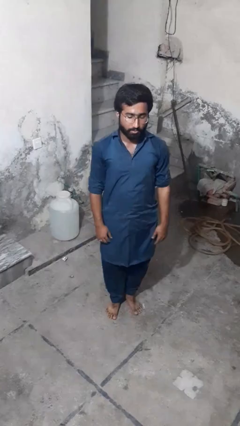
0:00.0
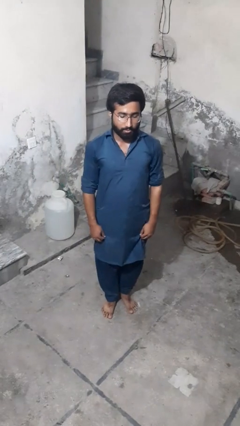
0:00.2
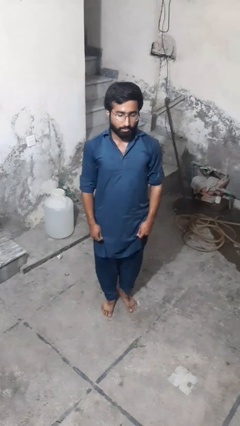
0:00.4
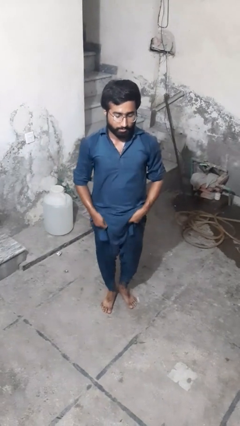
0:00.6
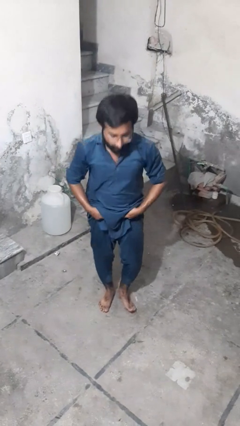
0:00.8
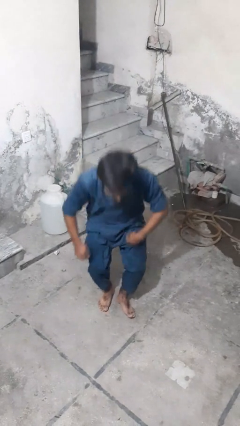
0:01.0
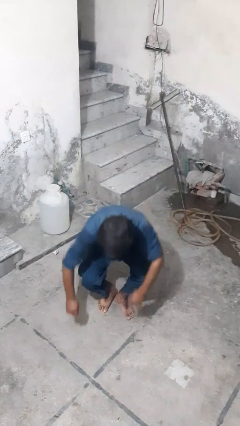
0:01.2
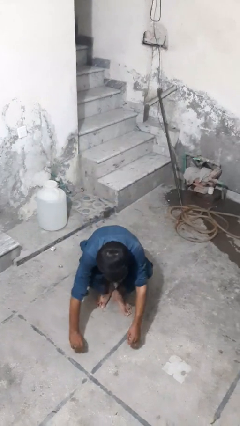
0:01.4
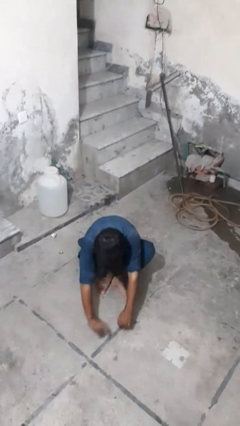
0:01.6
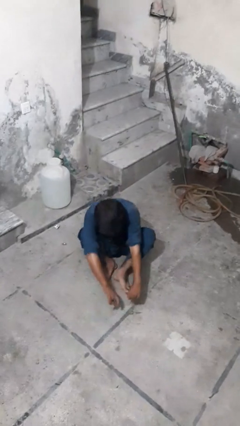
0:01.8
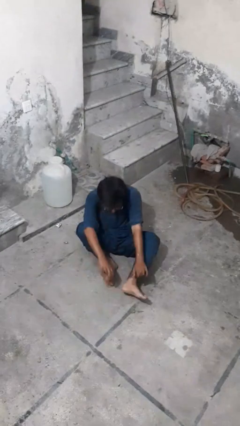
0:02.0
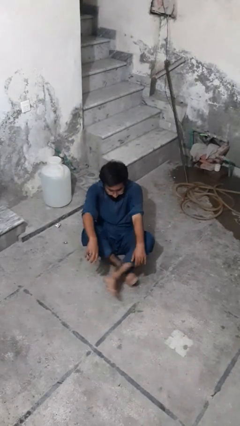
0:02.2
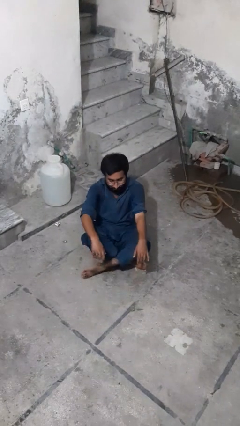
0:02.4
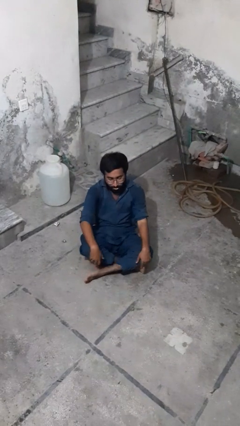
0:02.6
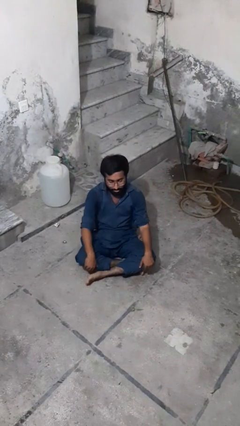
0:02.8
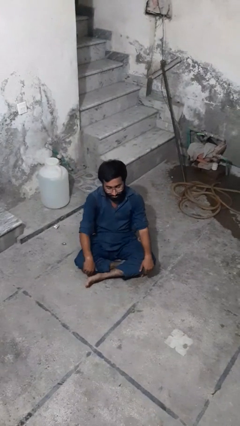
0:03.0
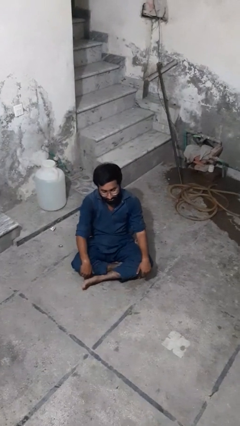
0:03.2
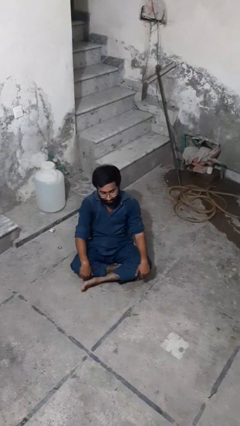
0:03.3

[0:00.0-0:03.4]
person sits crisscross

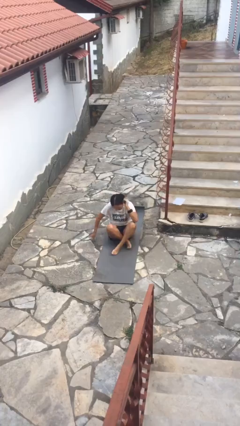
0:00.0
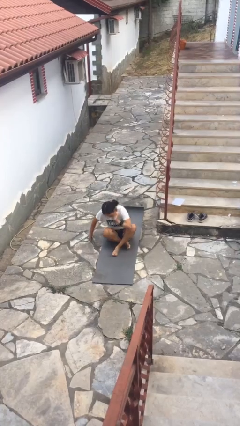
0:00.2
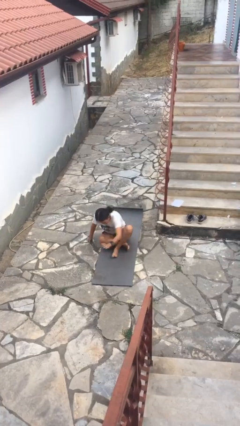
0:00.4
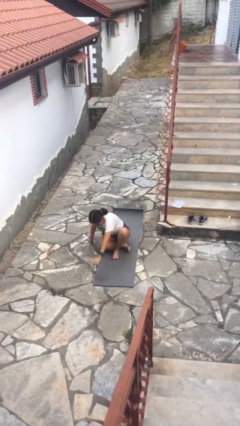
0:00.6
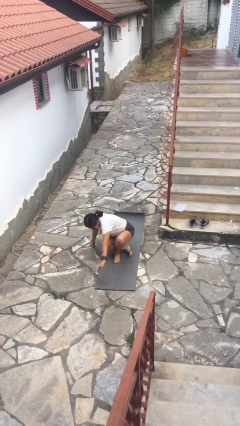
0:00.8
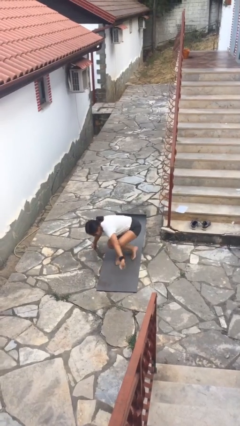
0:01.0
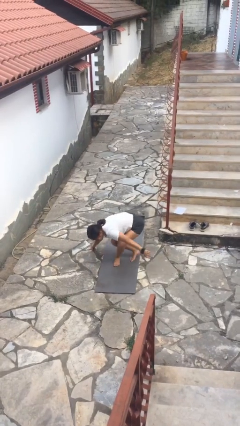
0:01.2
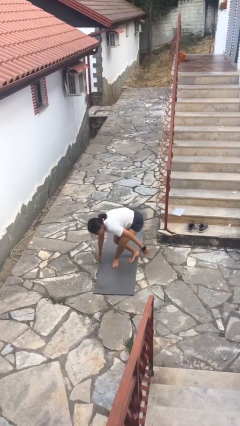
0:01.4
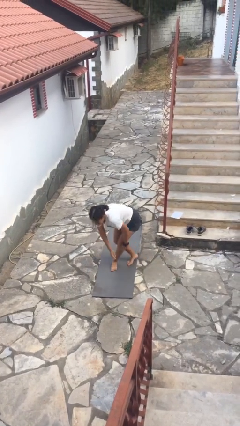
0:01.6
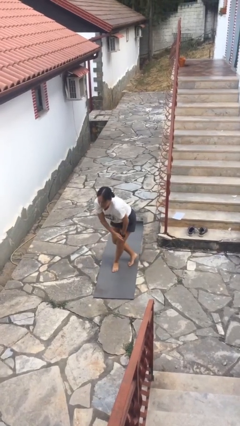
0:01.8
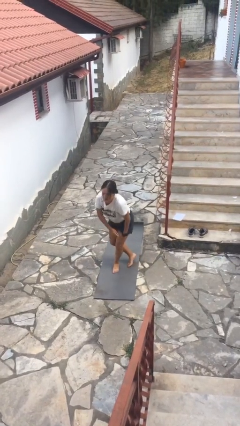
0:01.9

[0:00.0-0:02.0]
person stands up from floor

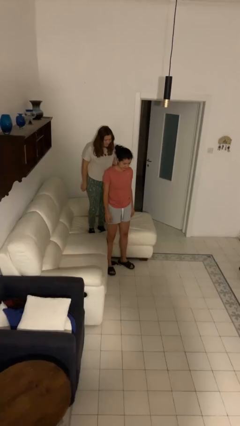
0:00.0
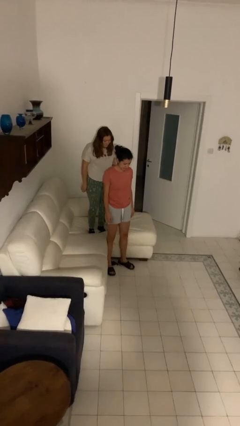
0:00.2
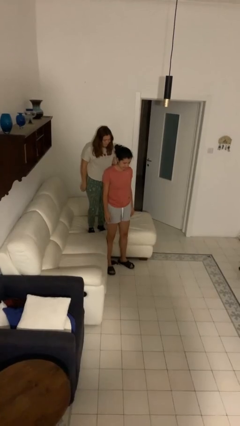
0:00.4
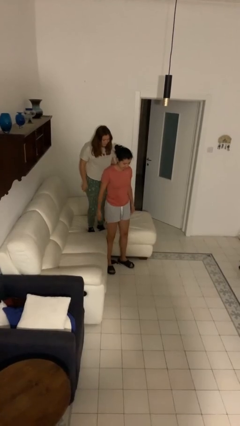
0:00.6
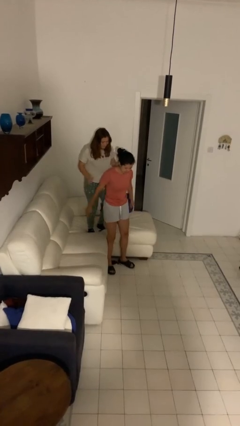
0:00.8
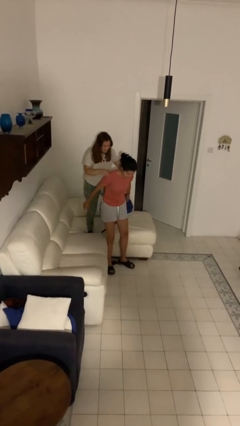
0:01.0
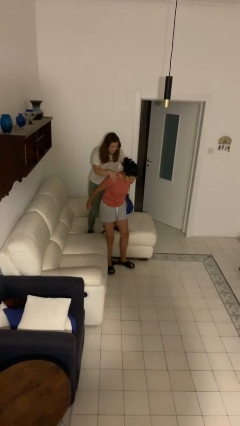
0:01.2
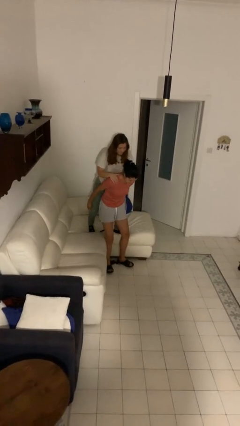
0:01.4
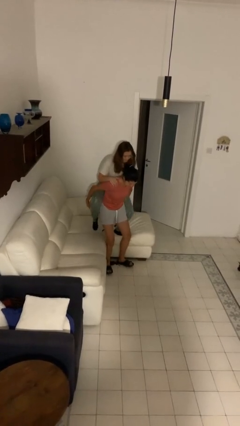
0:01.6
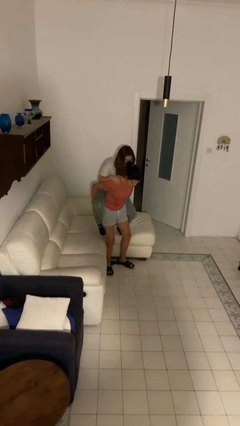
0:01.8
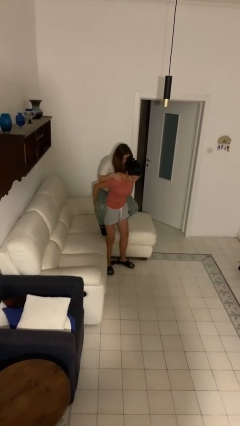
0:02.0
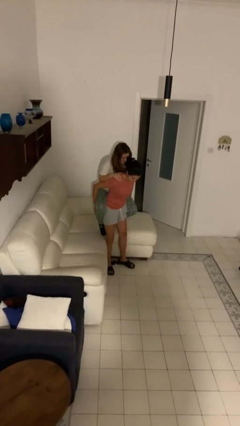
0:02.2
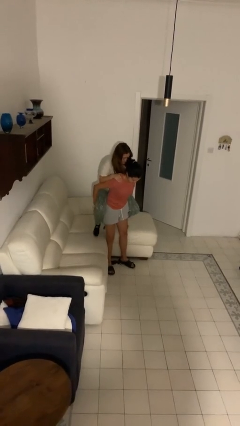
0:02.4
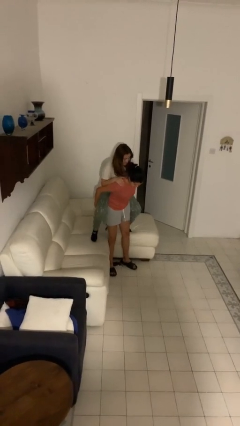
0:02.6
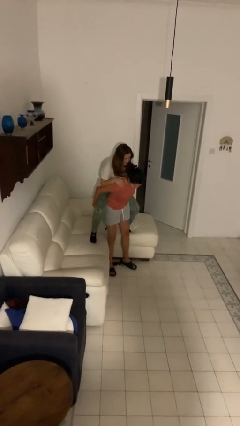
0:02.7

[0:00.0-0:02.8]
person carries person over shoulder

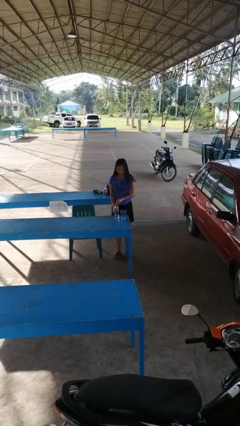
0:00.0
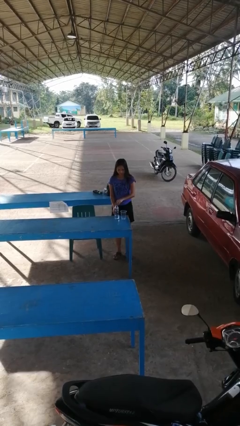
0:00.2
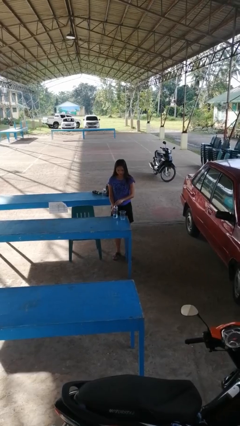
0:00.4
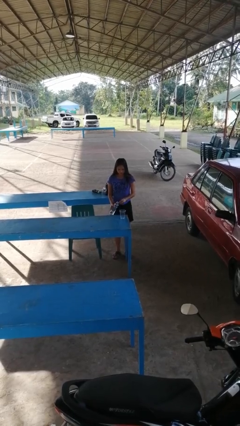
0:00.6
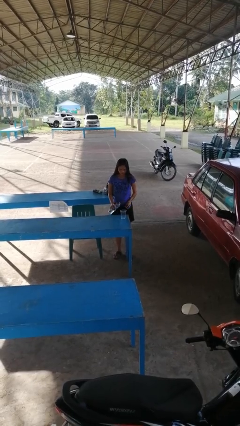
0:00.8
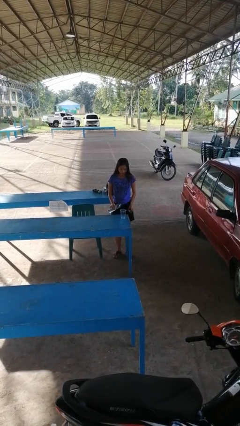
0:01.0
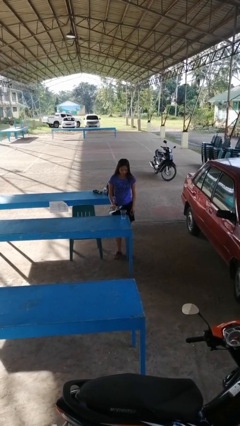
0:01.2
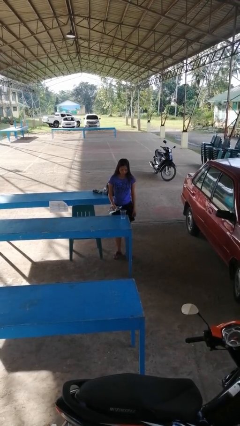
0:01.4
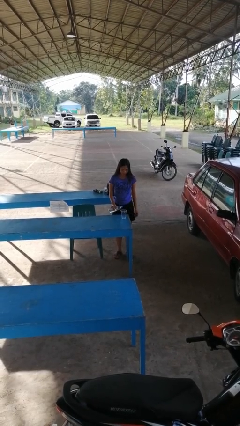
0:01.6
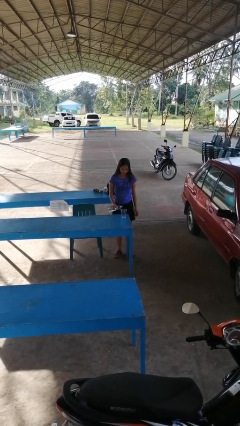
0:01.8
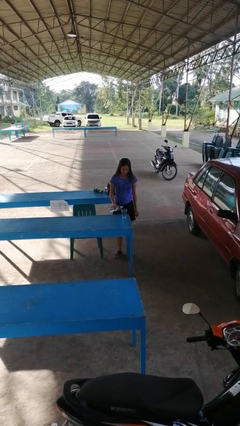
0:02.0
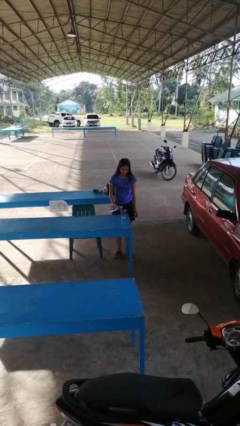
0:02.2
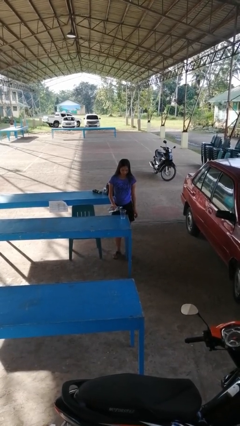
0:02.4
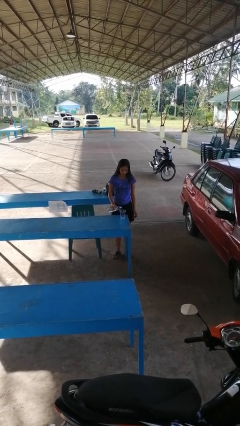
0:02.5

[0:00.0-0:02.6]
person pours liquid into cup

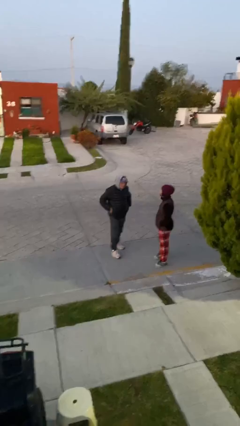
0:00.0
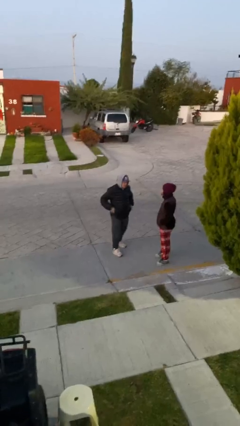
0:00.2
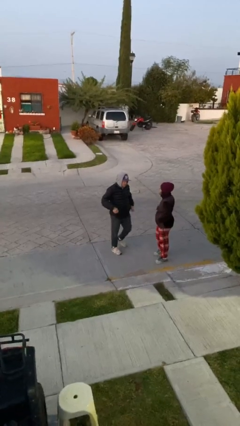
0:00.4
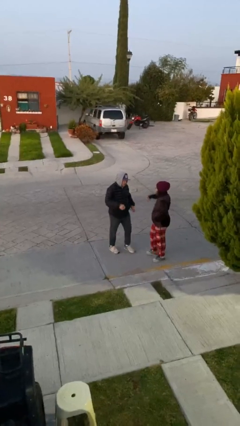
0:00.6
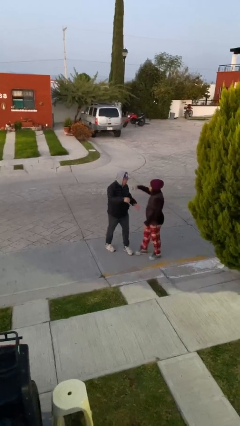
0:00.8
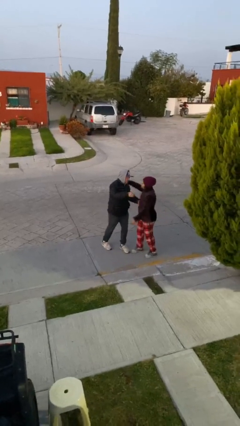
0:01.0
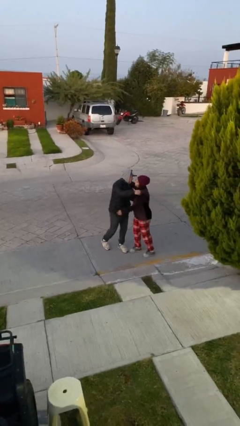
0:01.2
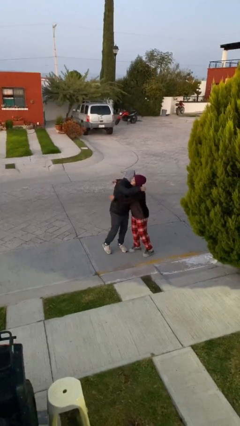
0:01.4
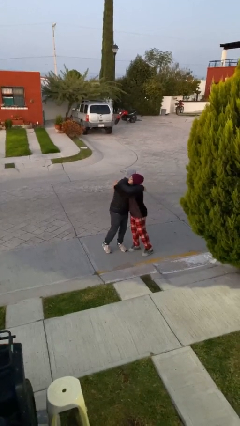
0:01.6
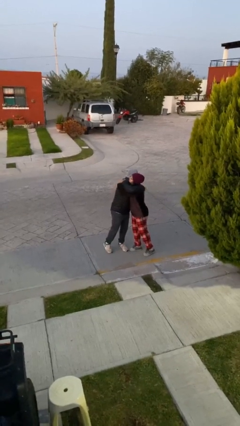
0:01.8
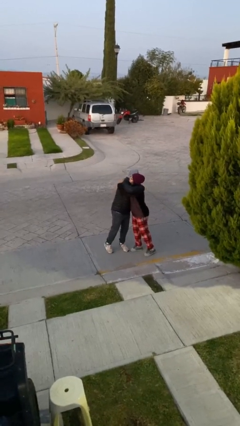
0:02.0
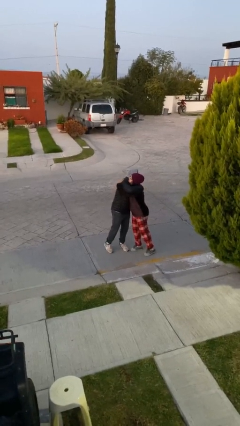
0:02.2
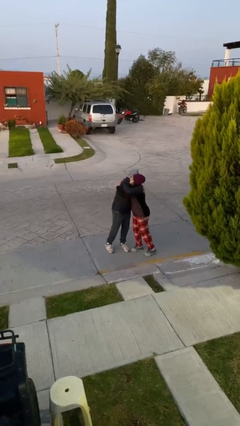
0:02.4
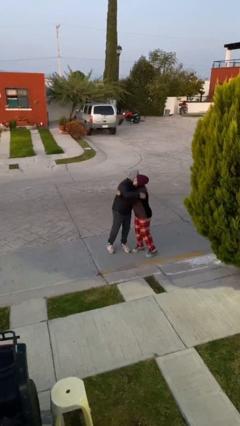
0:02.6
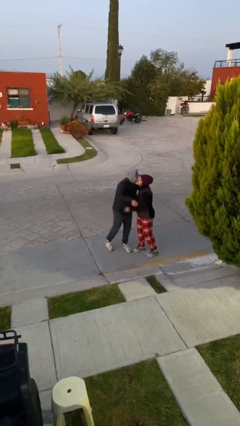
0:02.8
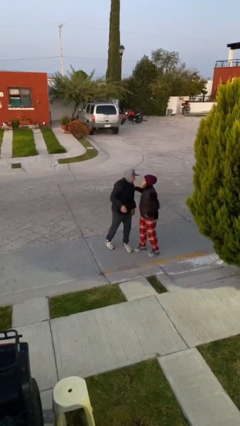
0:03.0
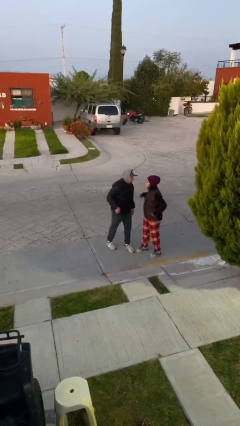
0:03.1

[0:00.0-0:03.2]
person embraces person

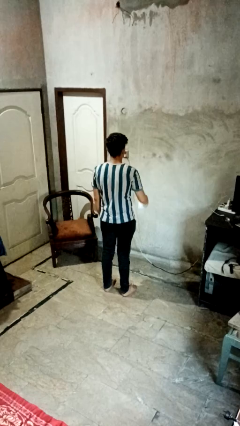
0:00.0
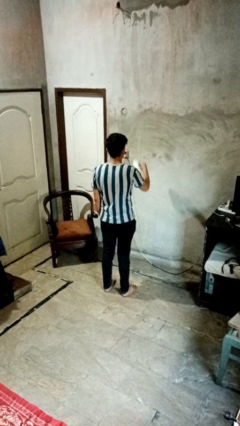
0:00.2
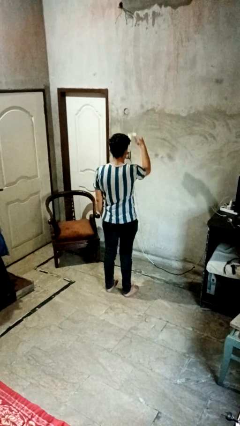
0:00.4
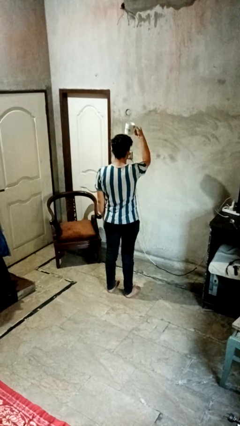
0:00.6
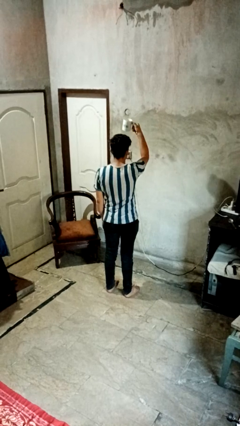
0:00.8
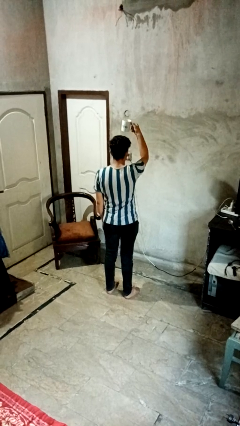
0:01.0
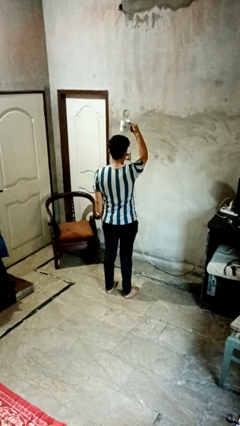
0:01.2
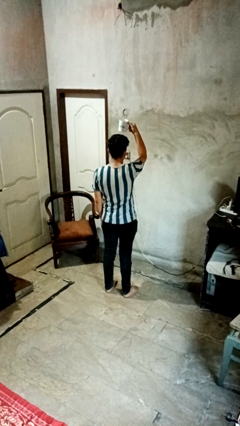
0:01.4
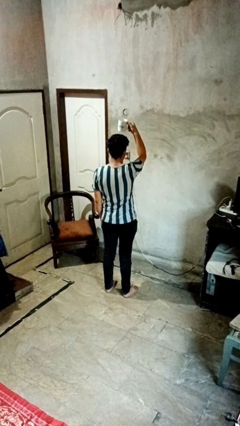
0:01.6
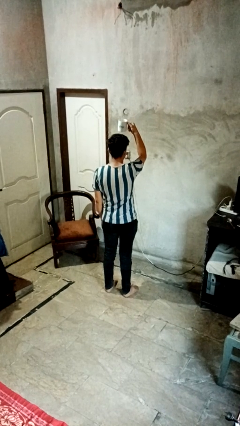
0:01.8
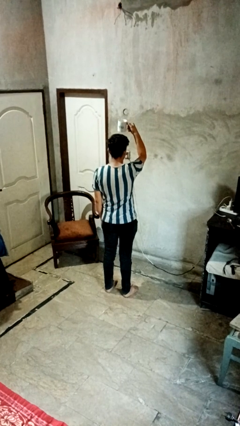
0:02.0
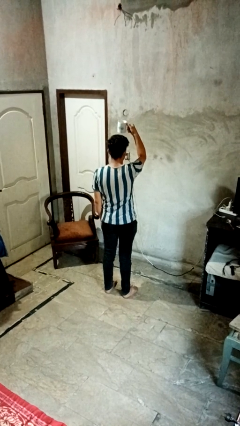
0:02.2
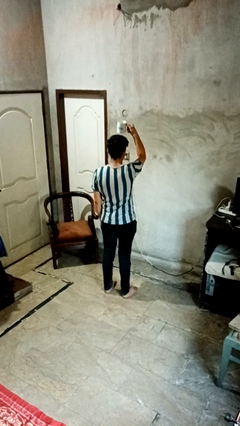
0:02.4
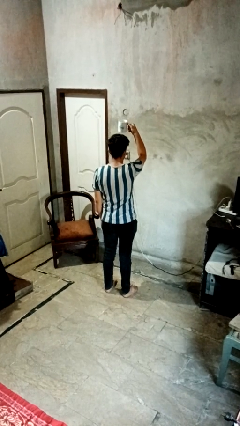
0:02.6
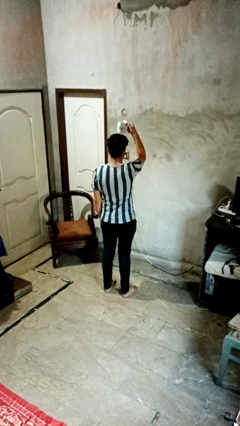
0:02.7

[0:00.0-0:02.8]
person holds object above head

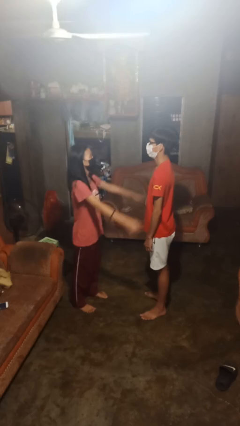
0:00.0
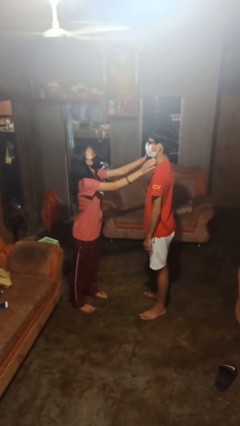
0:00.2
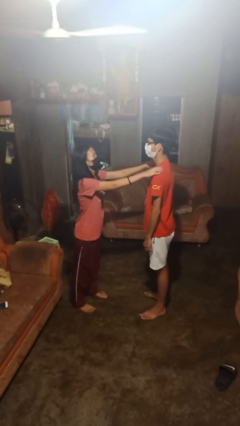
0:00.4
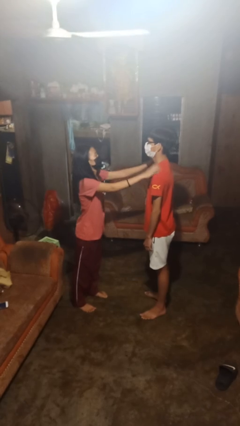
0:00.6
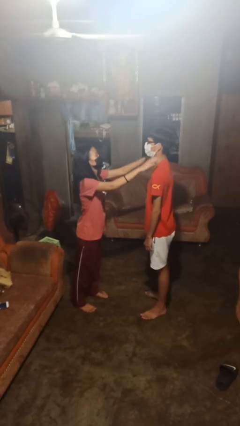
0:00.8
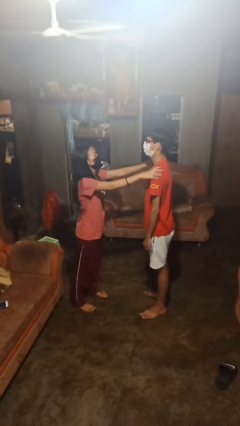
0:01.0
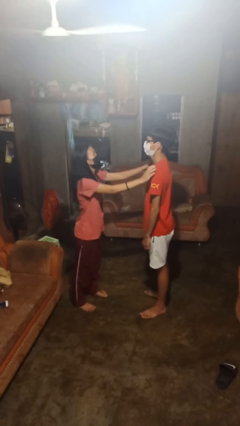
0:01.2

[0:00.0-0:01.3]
person pounds shoulders of person
